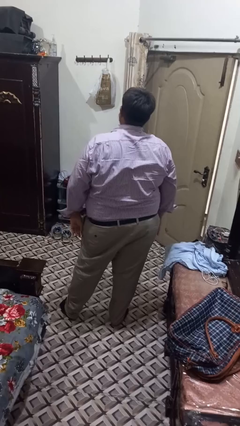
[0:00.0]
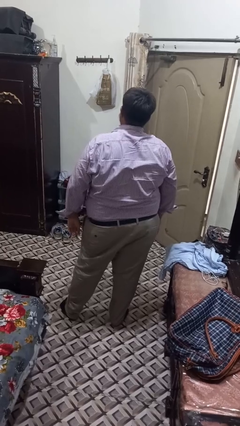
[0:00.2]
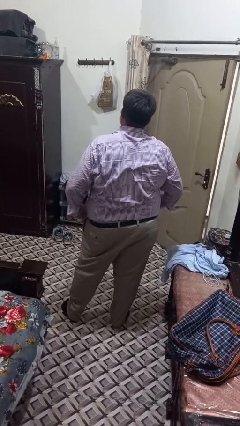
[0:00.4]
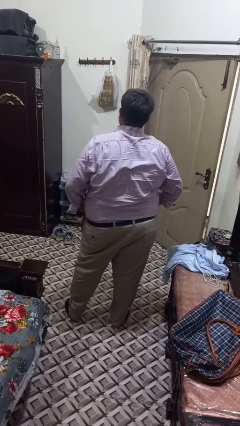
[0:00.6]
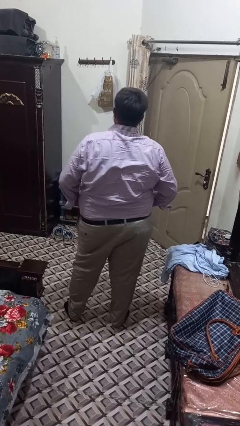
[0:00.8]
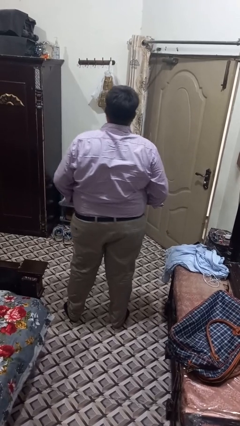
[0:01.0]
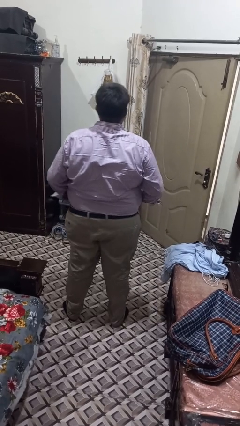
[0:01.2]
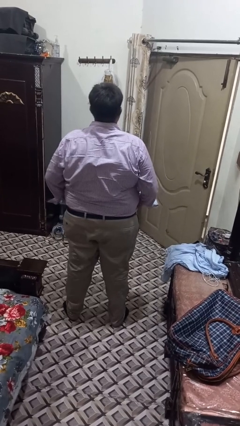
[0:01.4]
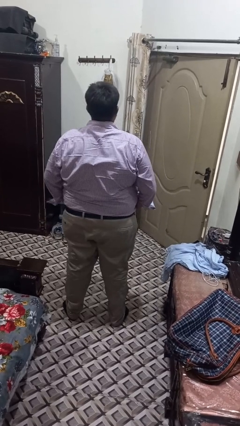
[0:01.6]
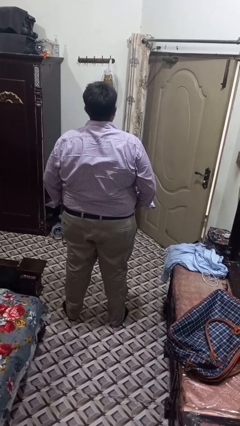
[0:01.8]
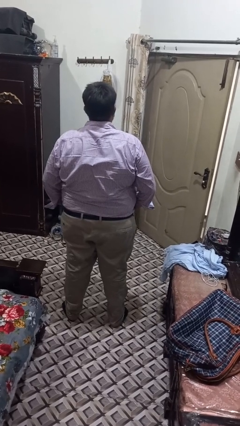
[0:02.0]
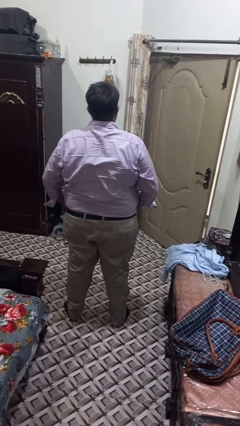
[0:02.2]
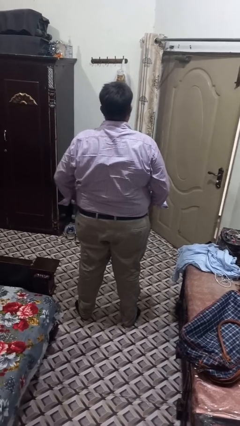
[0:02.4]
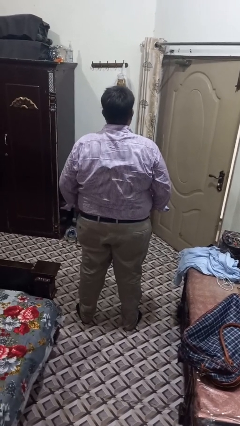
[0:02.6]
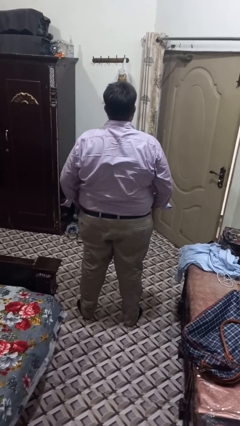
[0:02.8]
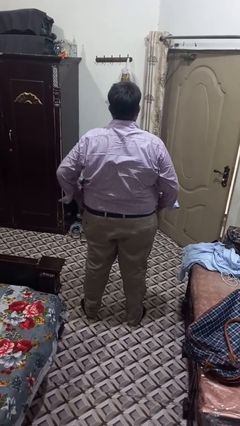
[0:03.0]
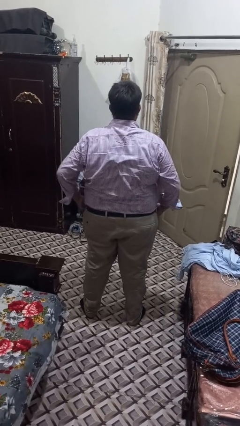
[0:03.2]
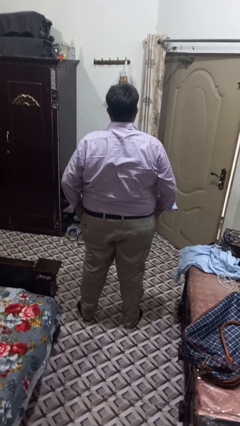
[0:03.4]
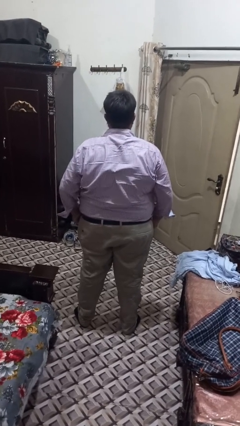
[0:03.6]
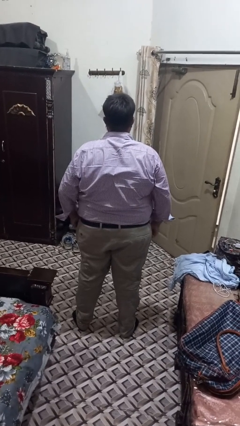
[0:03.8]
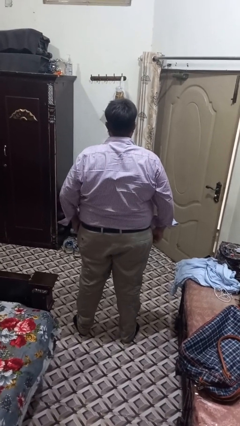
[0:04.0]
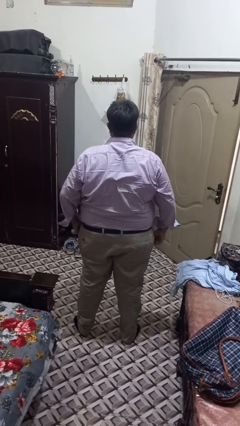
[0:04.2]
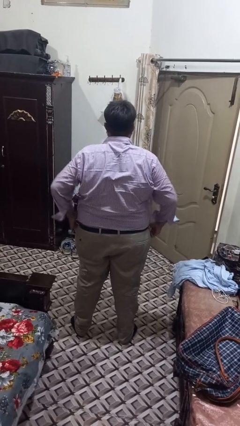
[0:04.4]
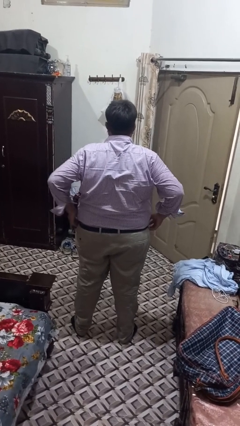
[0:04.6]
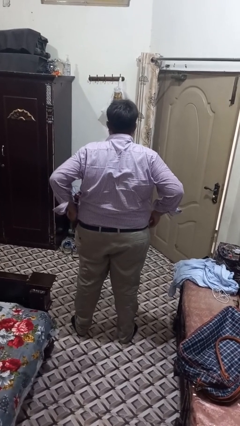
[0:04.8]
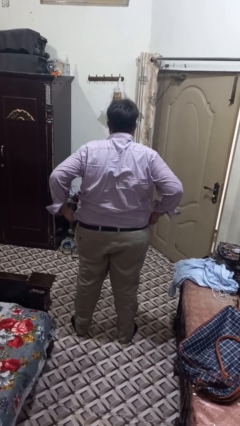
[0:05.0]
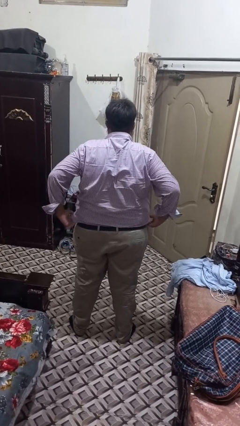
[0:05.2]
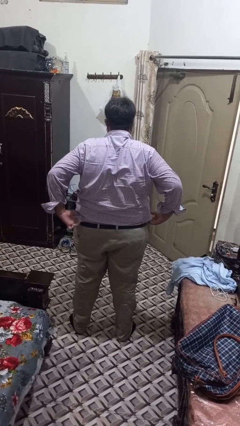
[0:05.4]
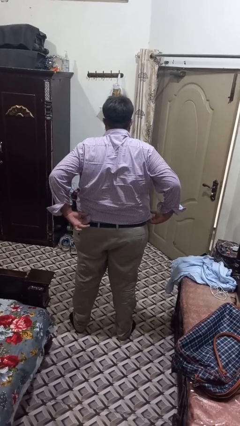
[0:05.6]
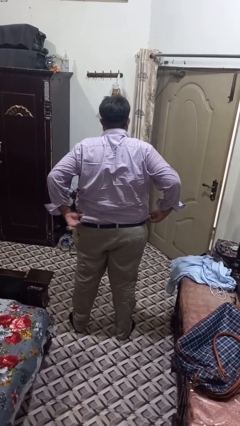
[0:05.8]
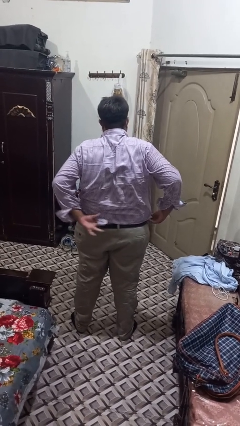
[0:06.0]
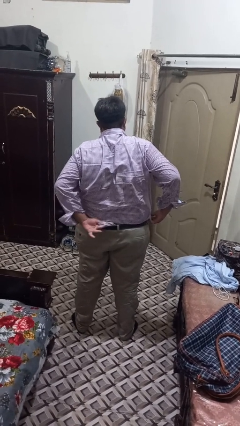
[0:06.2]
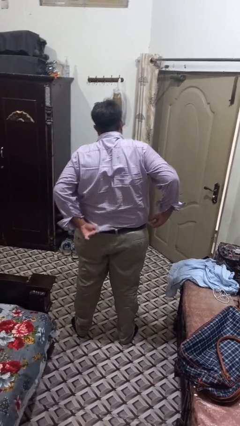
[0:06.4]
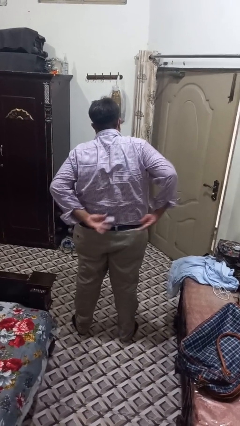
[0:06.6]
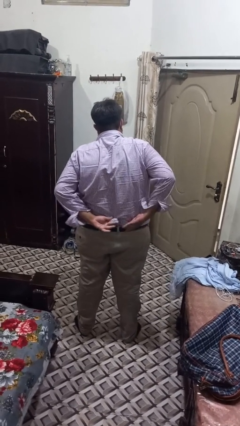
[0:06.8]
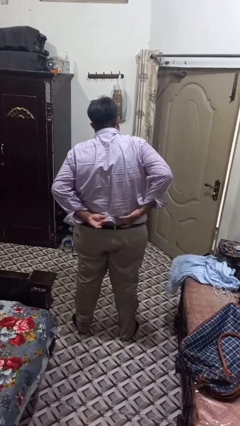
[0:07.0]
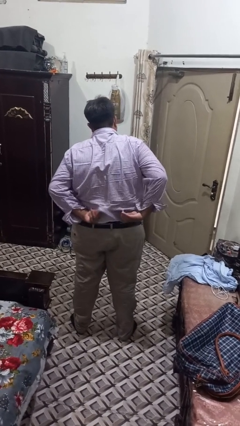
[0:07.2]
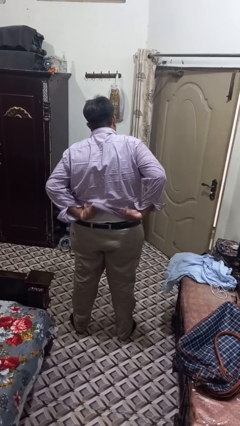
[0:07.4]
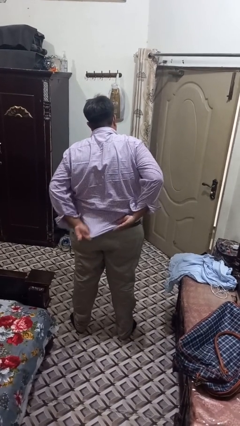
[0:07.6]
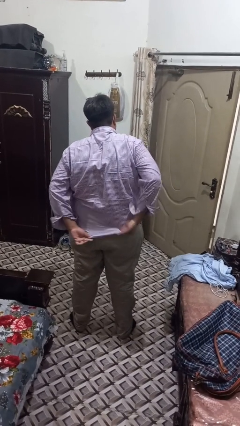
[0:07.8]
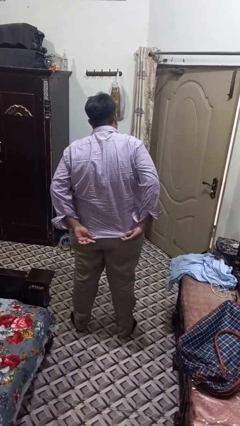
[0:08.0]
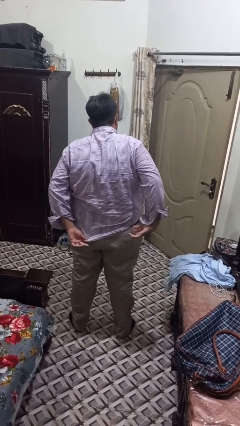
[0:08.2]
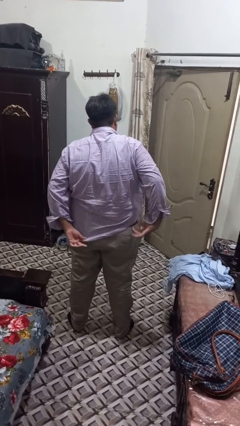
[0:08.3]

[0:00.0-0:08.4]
person untucks shirt

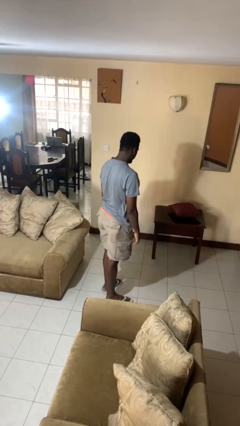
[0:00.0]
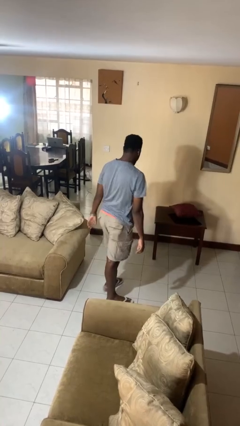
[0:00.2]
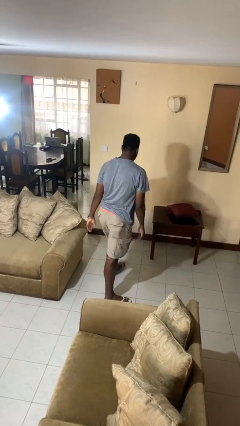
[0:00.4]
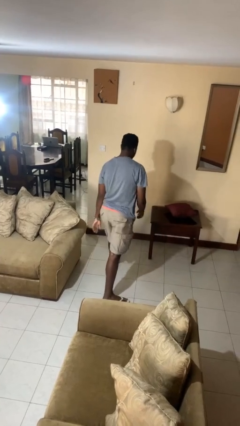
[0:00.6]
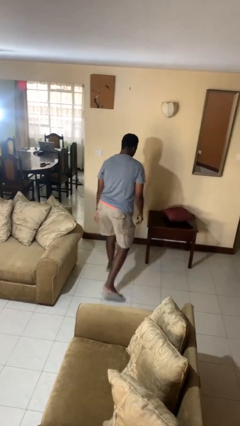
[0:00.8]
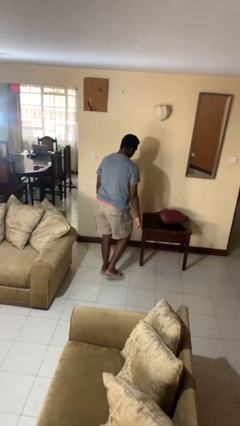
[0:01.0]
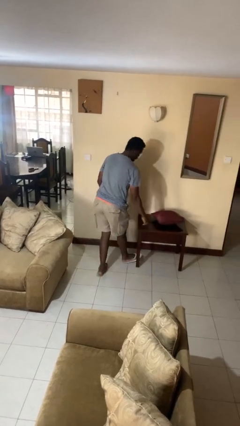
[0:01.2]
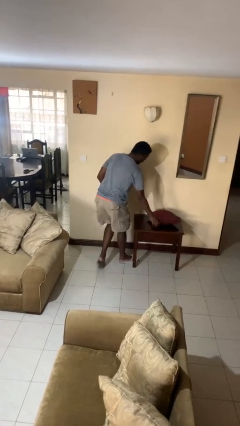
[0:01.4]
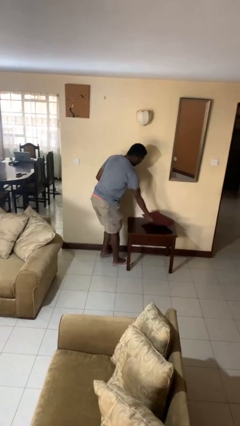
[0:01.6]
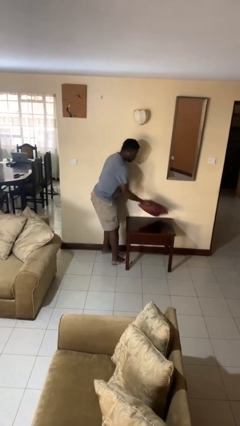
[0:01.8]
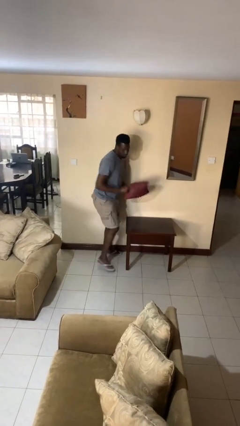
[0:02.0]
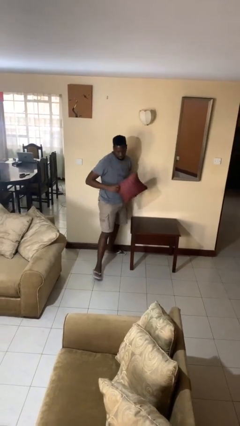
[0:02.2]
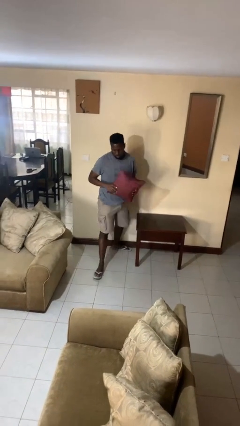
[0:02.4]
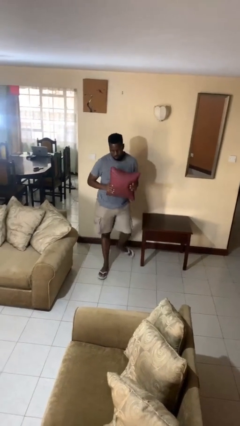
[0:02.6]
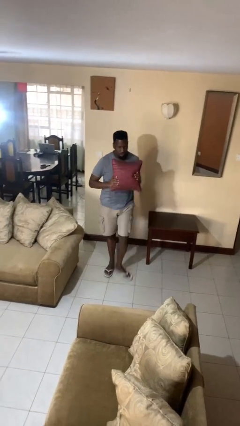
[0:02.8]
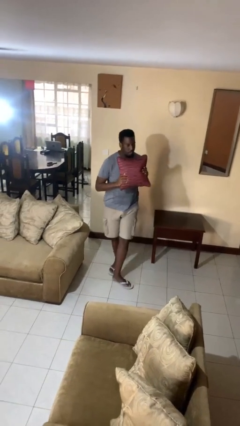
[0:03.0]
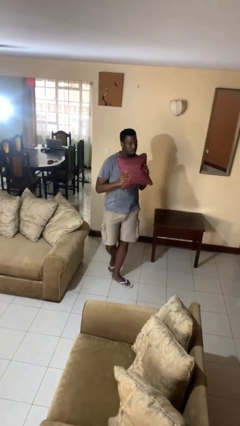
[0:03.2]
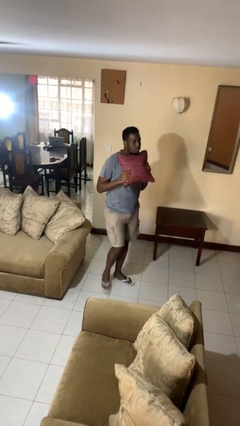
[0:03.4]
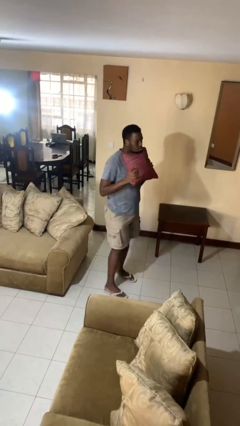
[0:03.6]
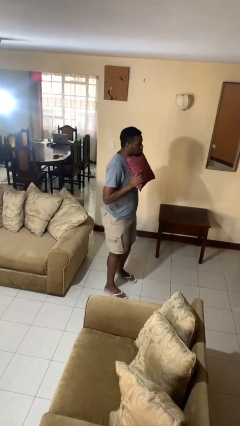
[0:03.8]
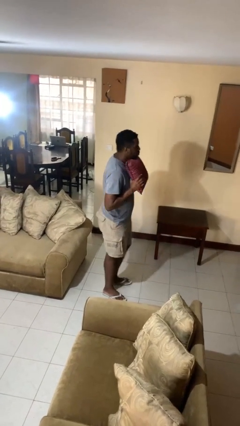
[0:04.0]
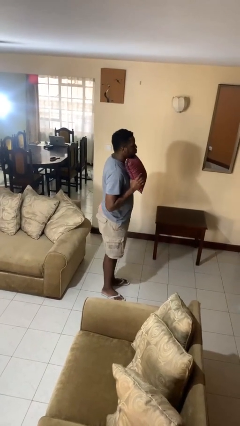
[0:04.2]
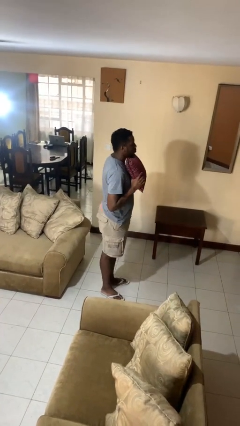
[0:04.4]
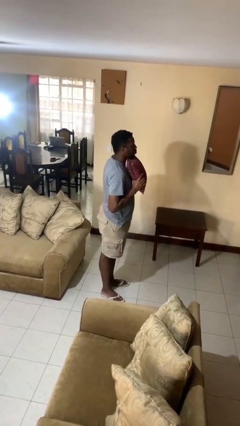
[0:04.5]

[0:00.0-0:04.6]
person picks up object from table

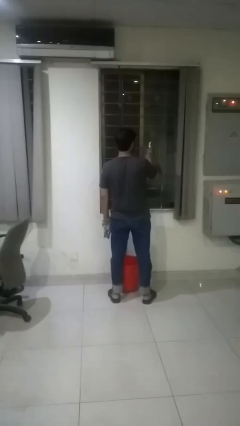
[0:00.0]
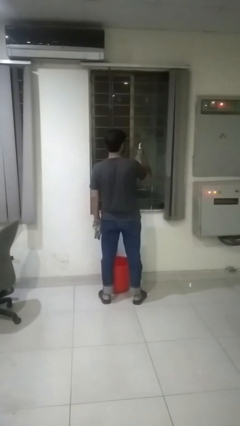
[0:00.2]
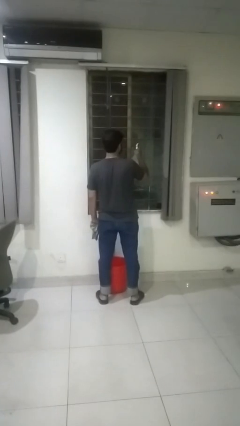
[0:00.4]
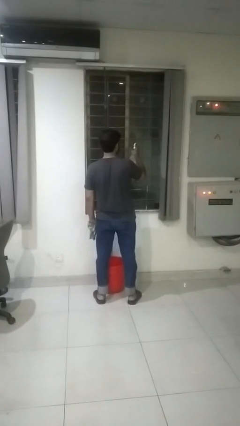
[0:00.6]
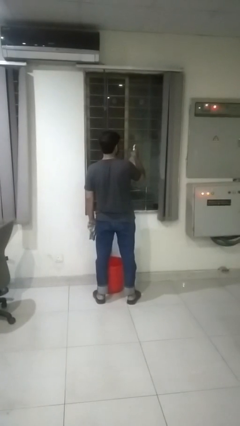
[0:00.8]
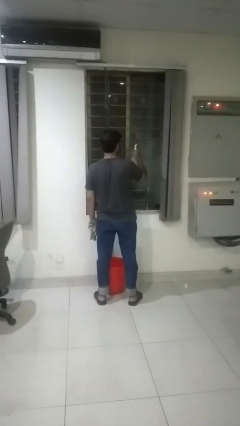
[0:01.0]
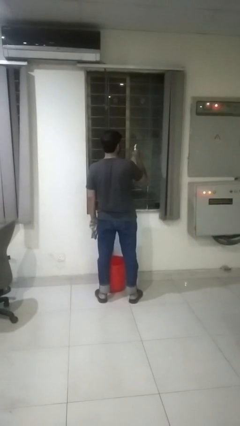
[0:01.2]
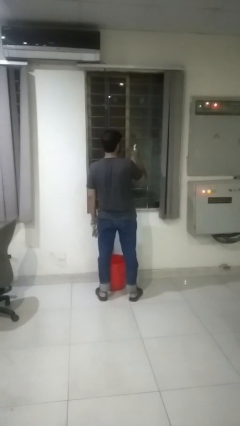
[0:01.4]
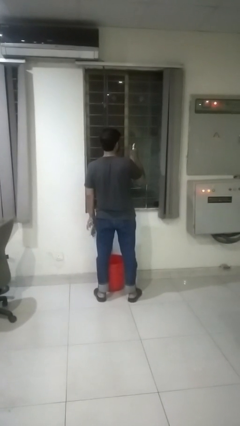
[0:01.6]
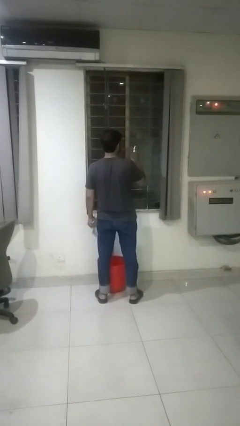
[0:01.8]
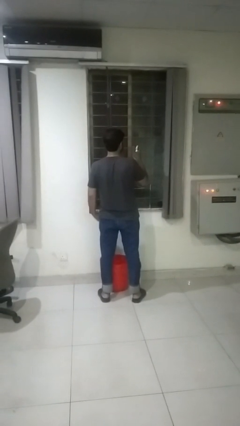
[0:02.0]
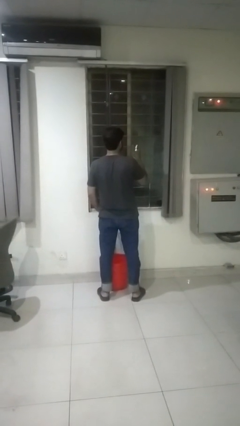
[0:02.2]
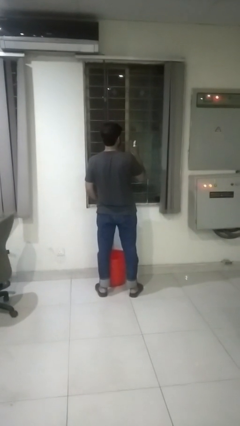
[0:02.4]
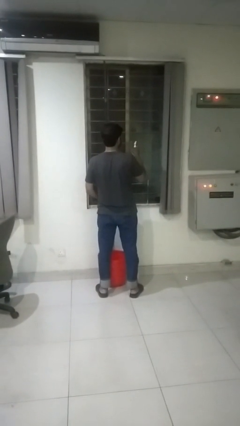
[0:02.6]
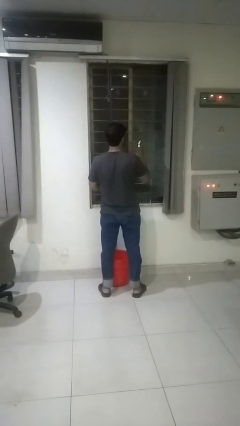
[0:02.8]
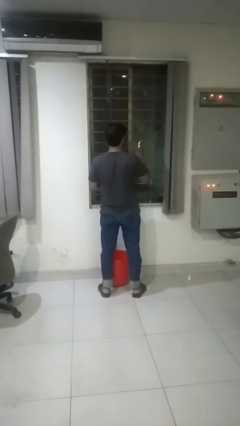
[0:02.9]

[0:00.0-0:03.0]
person sprays from bottle

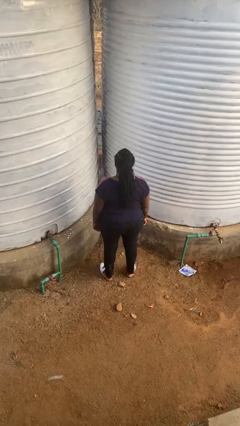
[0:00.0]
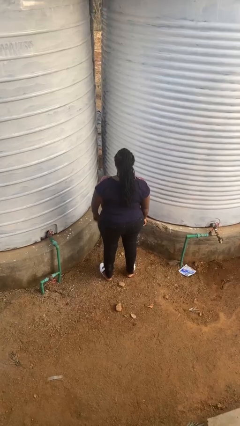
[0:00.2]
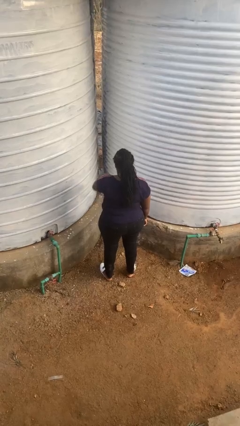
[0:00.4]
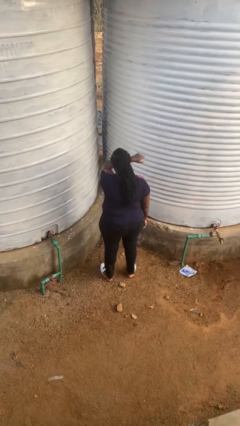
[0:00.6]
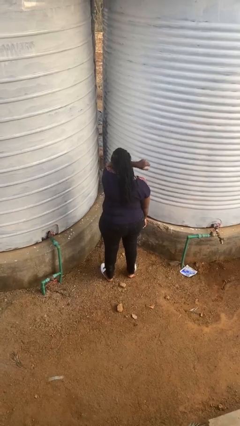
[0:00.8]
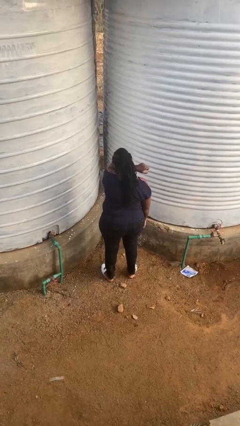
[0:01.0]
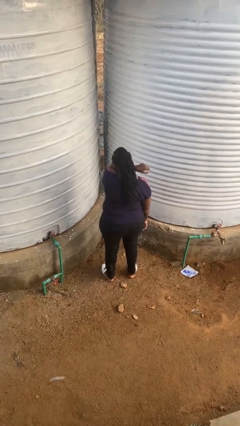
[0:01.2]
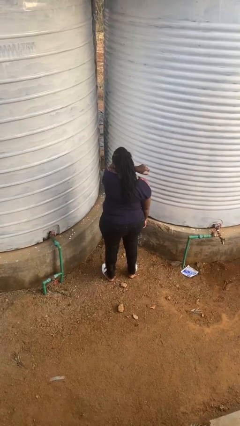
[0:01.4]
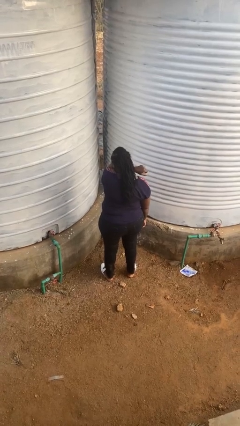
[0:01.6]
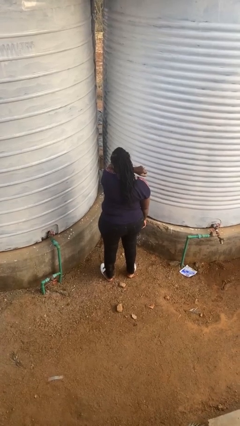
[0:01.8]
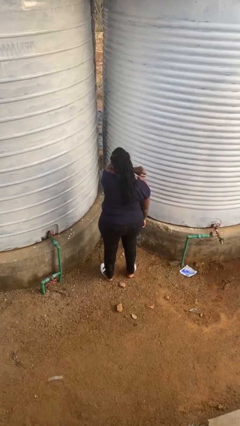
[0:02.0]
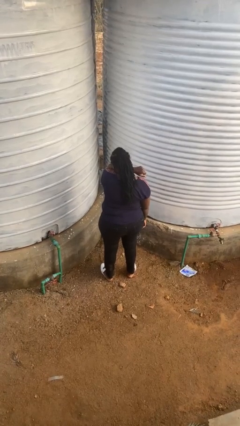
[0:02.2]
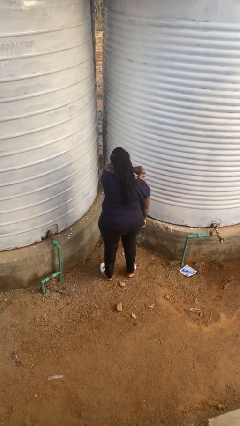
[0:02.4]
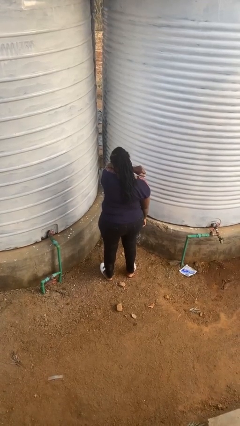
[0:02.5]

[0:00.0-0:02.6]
person sneezes into arm
